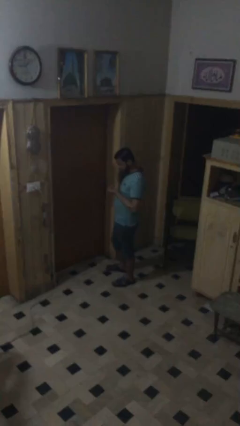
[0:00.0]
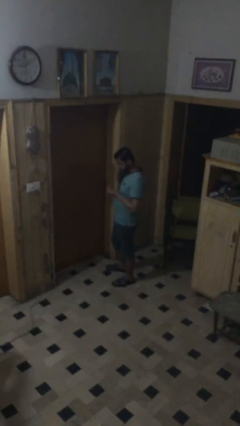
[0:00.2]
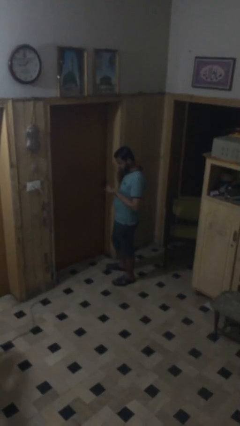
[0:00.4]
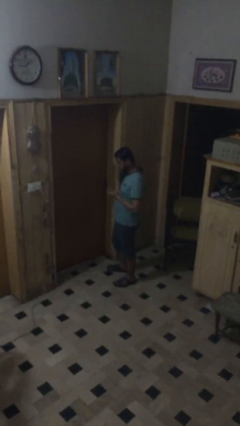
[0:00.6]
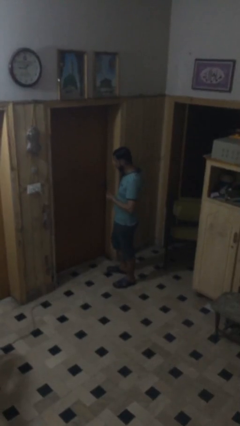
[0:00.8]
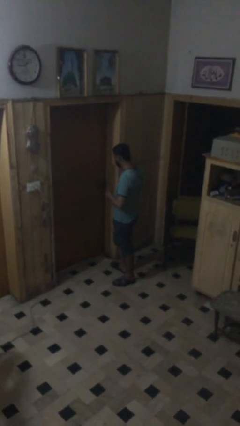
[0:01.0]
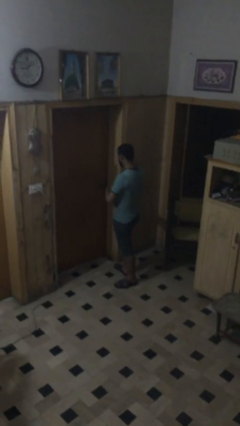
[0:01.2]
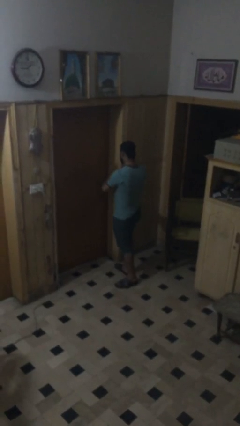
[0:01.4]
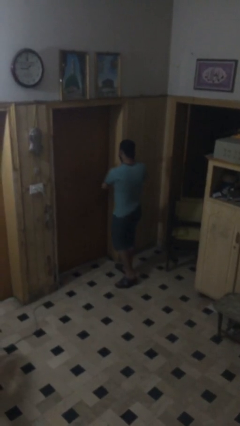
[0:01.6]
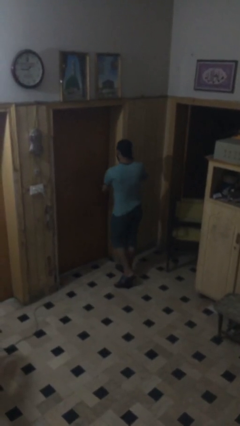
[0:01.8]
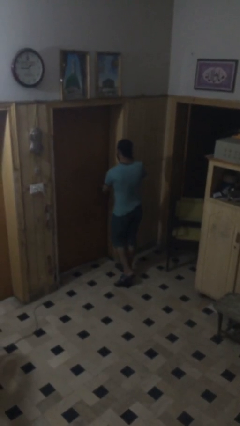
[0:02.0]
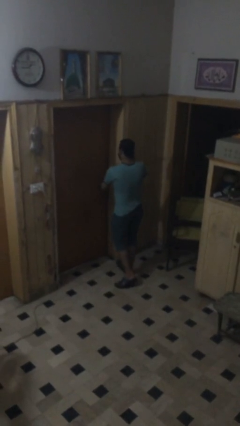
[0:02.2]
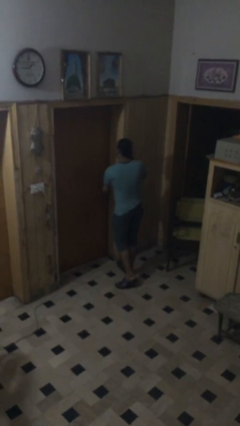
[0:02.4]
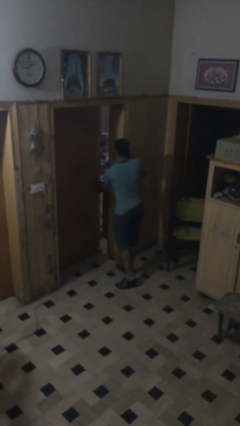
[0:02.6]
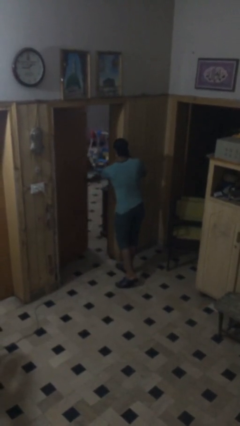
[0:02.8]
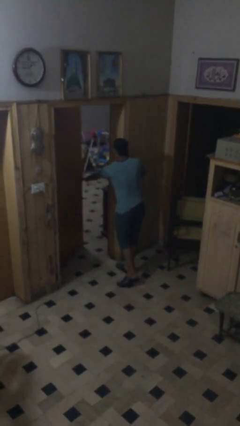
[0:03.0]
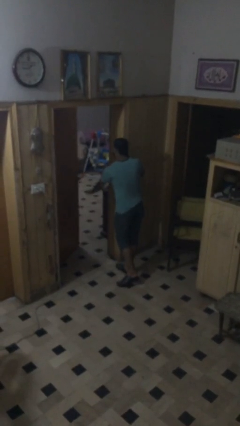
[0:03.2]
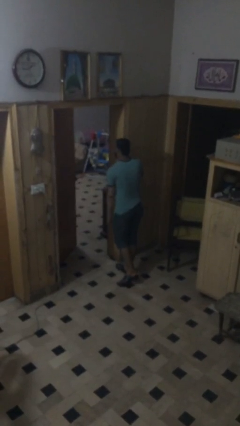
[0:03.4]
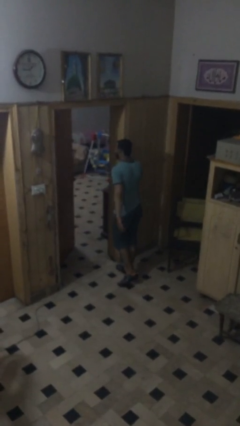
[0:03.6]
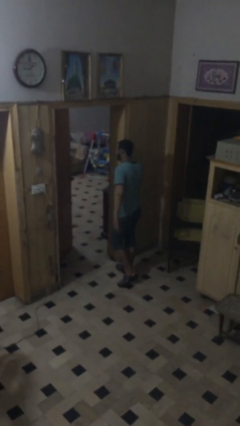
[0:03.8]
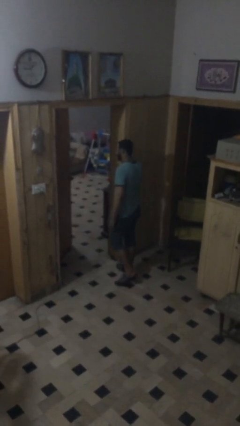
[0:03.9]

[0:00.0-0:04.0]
person opens facility door

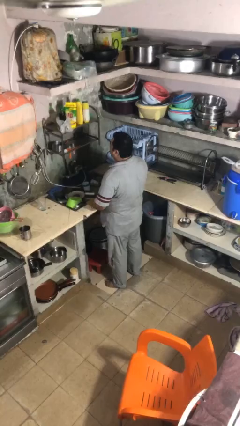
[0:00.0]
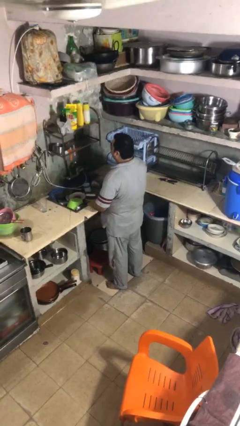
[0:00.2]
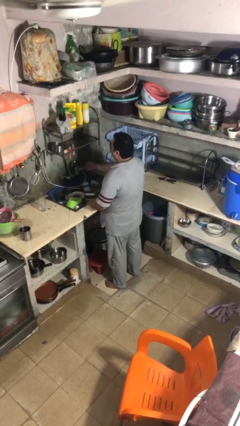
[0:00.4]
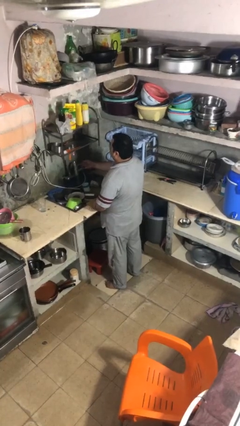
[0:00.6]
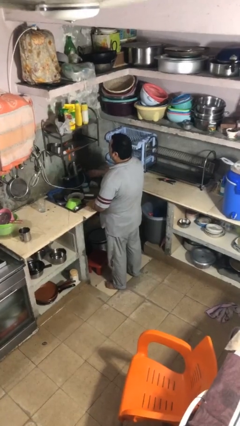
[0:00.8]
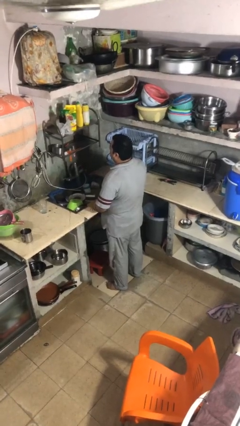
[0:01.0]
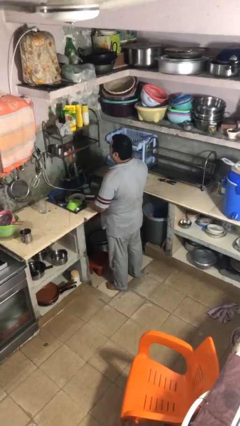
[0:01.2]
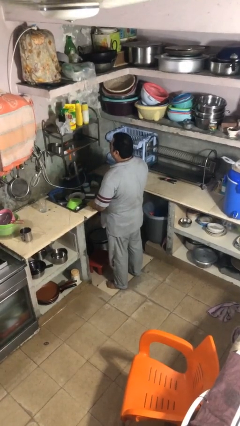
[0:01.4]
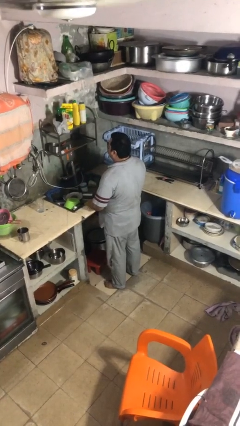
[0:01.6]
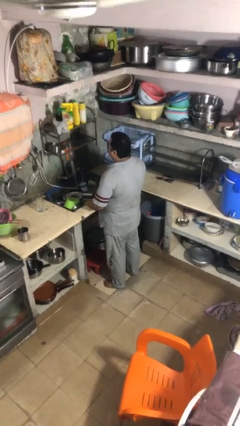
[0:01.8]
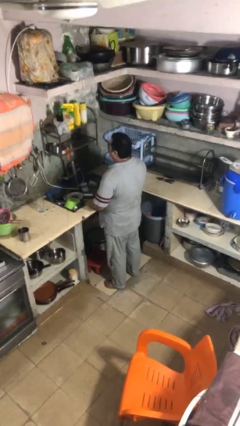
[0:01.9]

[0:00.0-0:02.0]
person turns on faucet

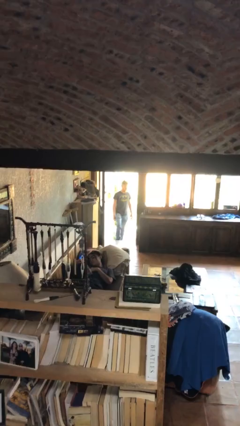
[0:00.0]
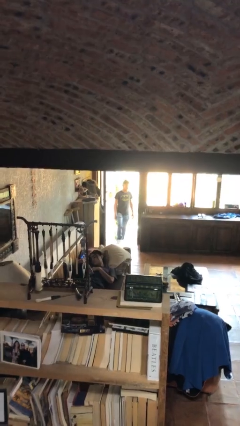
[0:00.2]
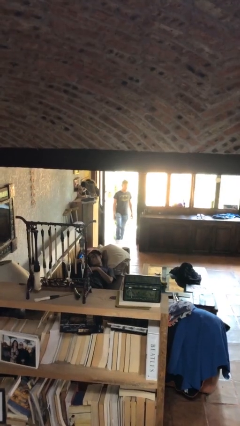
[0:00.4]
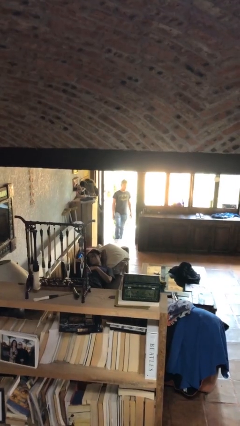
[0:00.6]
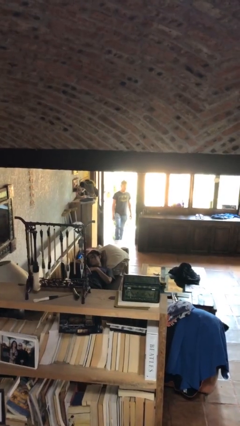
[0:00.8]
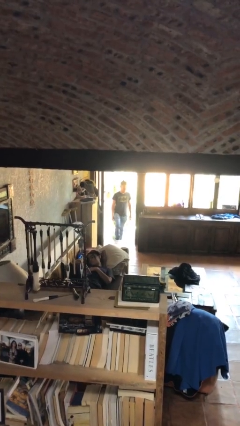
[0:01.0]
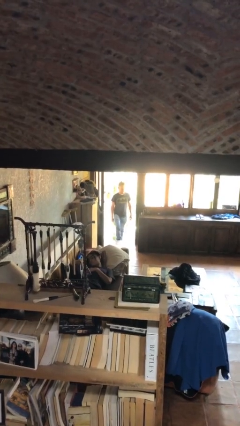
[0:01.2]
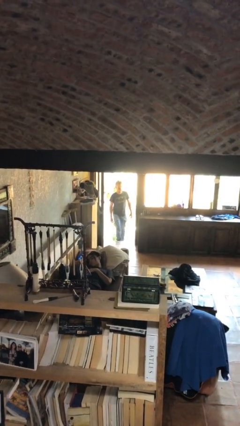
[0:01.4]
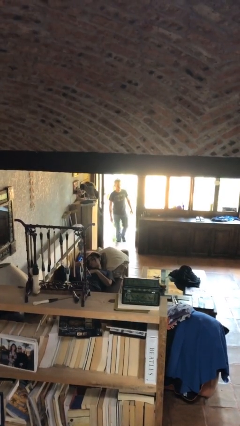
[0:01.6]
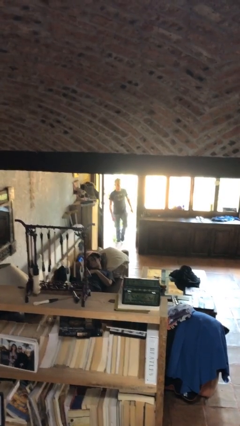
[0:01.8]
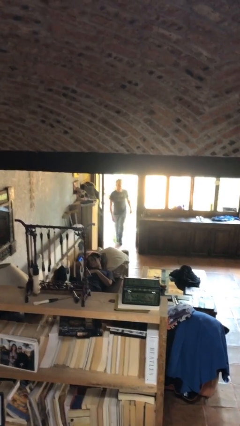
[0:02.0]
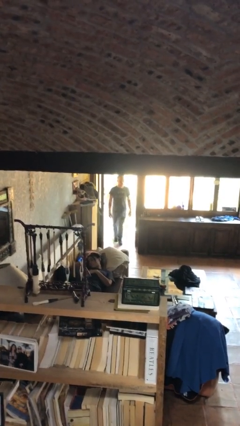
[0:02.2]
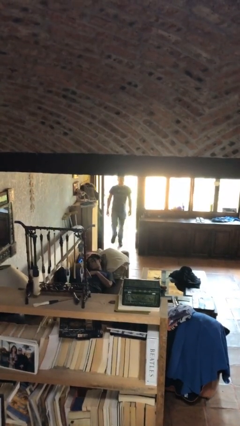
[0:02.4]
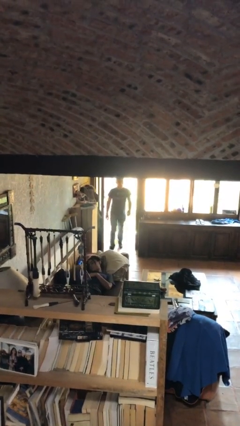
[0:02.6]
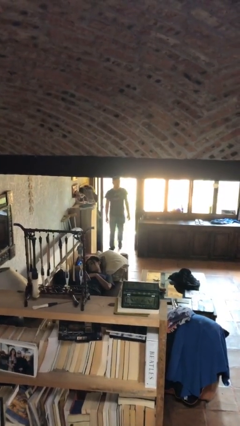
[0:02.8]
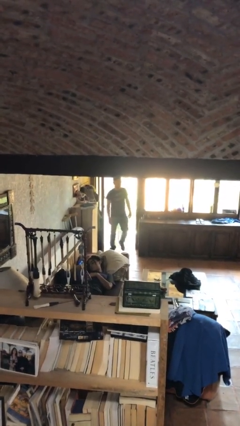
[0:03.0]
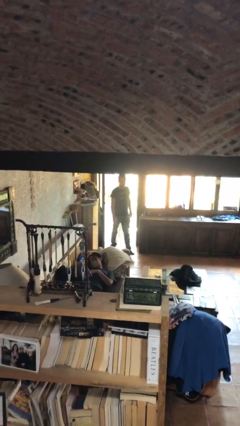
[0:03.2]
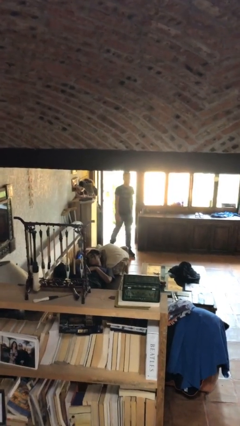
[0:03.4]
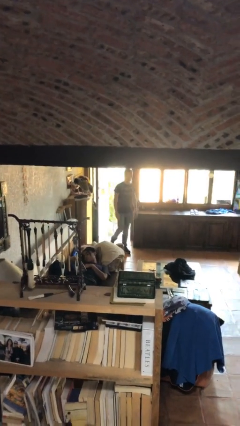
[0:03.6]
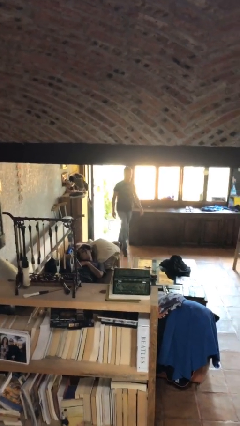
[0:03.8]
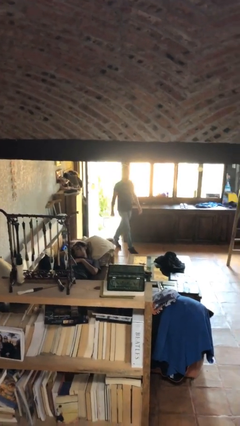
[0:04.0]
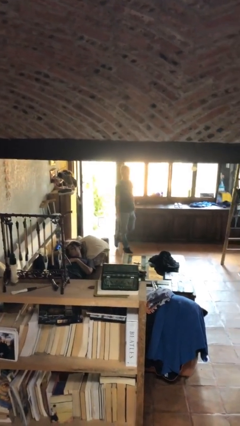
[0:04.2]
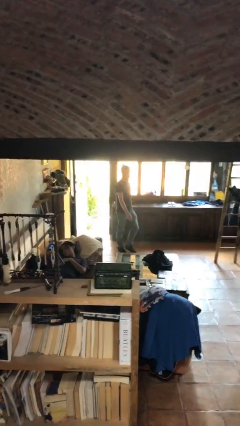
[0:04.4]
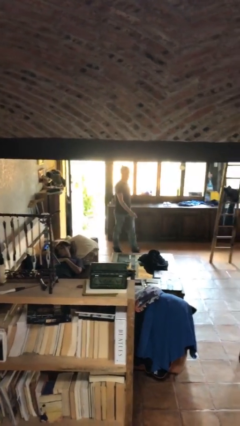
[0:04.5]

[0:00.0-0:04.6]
person enters scene through structure

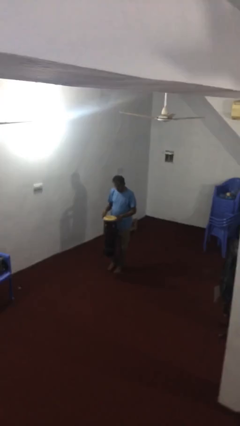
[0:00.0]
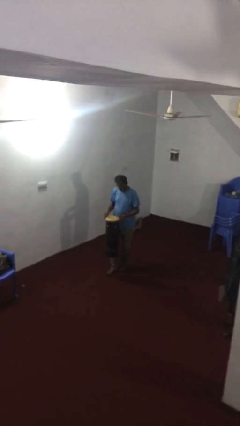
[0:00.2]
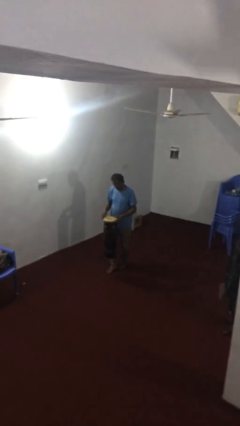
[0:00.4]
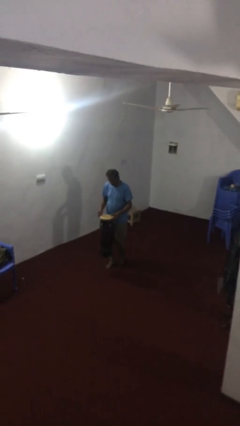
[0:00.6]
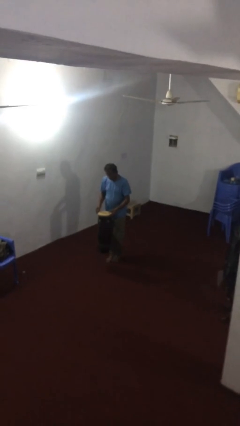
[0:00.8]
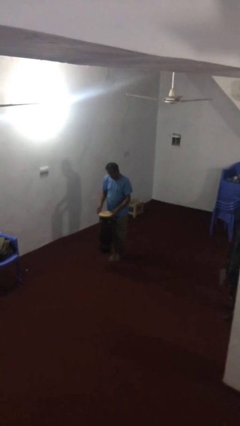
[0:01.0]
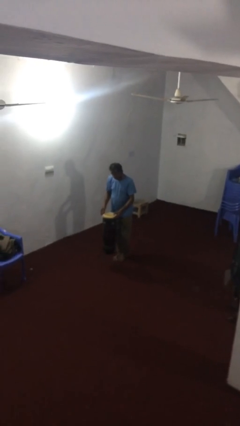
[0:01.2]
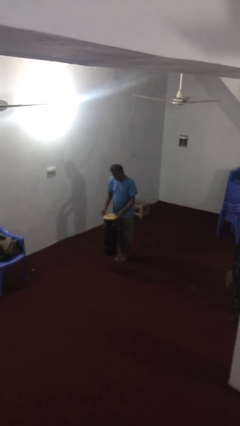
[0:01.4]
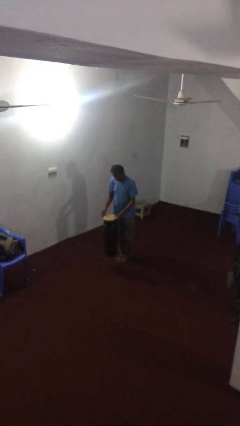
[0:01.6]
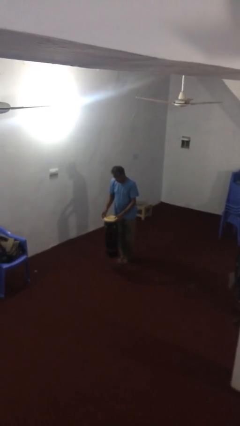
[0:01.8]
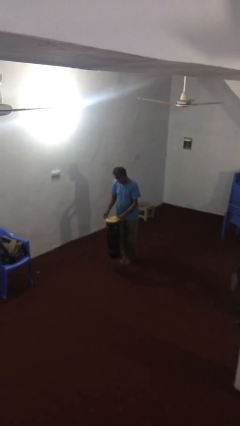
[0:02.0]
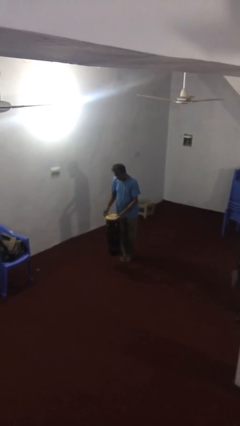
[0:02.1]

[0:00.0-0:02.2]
person puts down object on floor

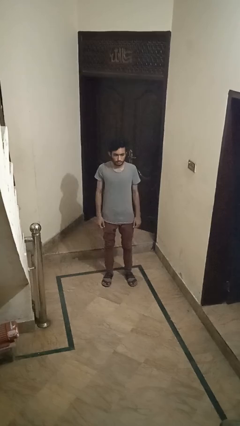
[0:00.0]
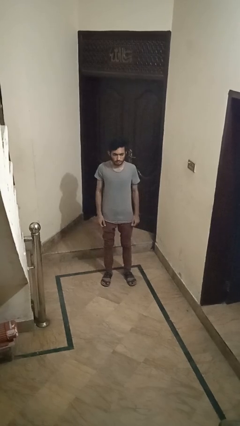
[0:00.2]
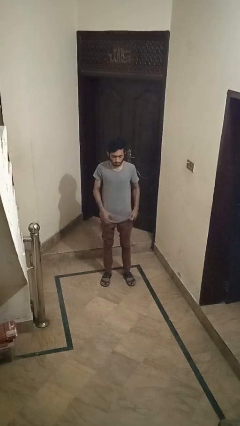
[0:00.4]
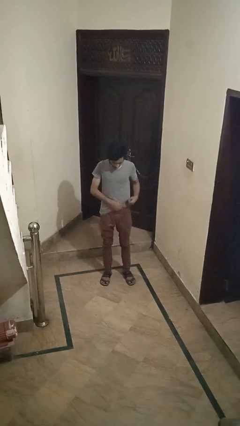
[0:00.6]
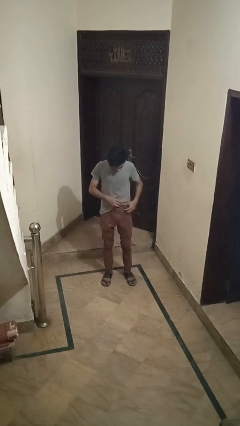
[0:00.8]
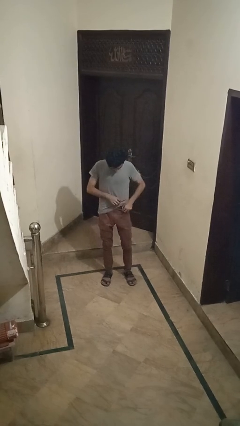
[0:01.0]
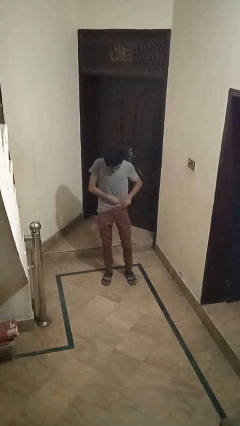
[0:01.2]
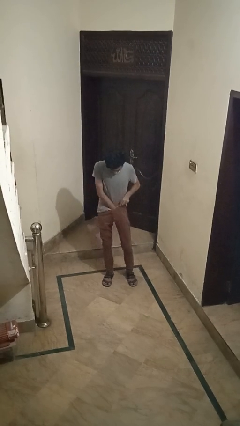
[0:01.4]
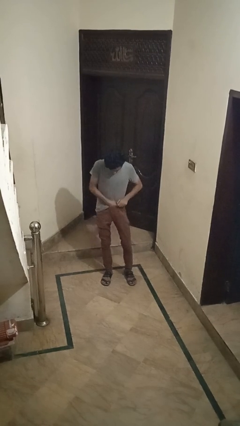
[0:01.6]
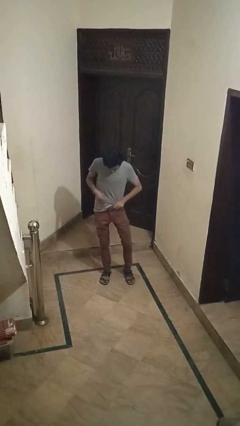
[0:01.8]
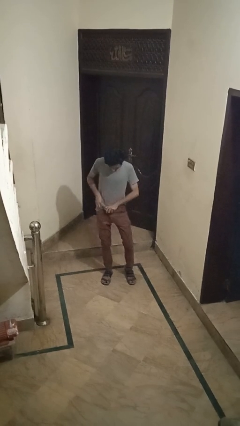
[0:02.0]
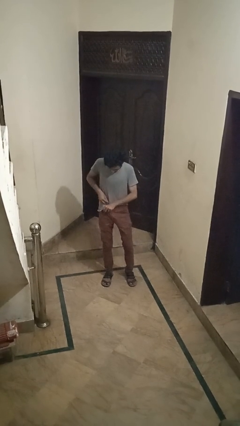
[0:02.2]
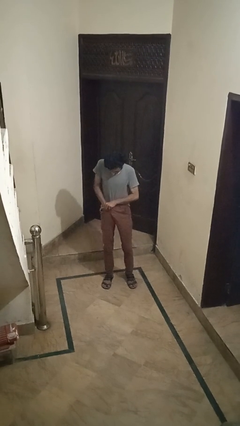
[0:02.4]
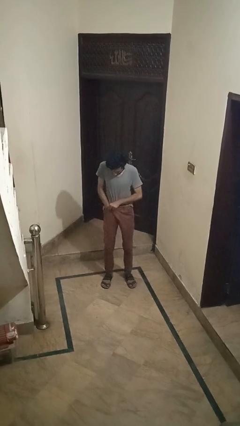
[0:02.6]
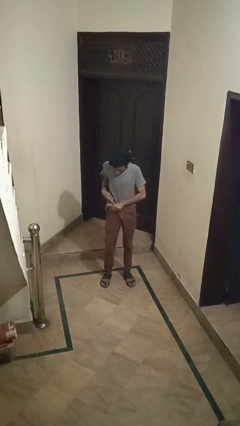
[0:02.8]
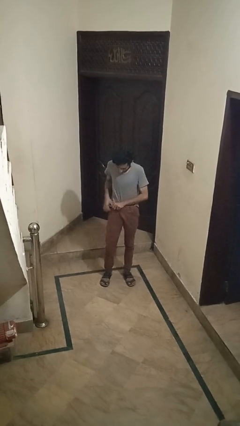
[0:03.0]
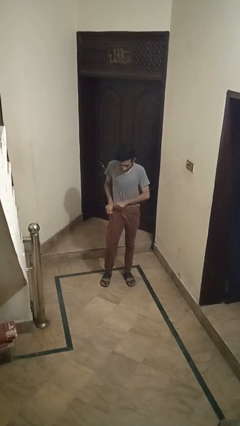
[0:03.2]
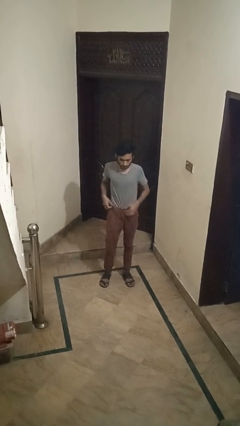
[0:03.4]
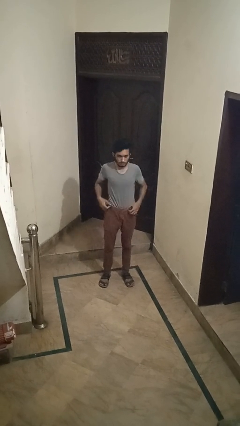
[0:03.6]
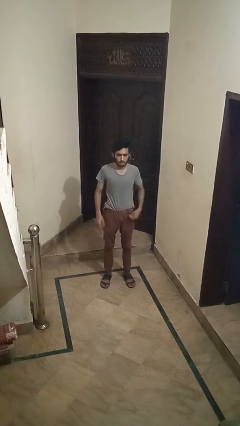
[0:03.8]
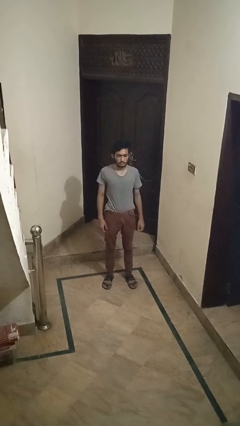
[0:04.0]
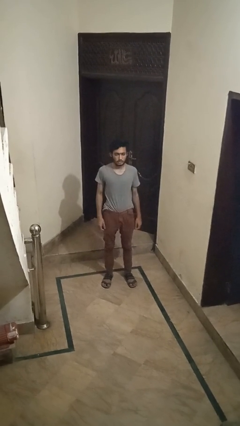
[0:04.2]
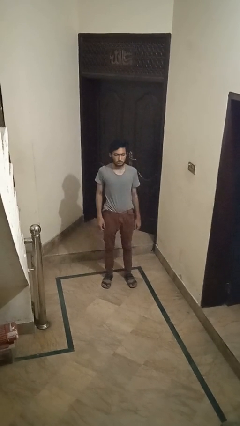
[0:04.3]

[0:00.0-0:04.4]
person tucks in shirt
